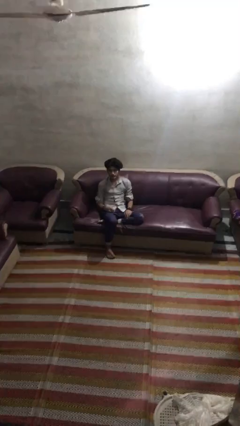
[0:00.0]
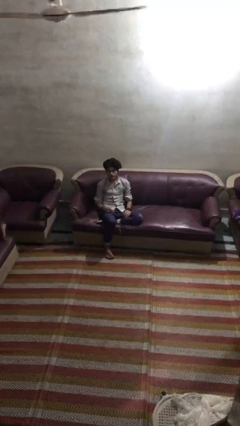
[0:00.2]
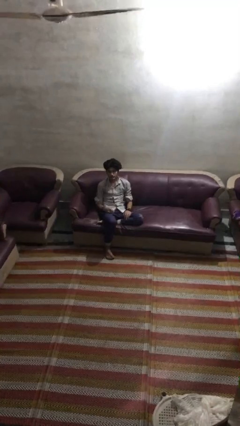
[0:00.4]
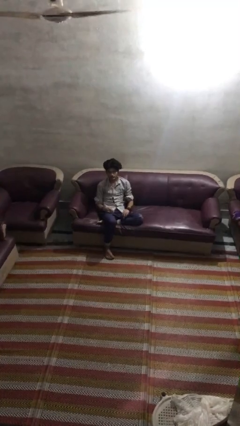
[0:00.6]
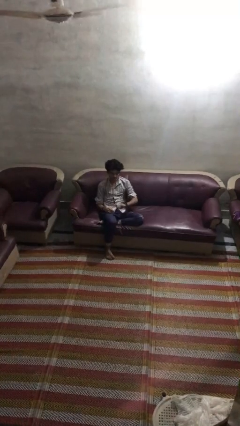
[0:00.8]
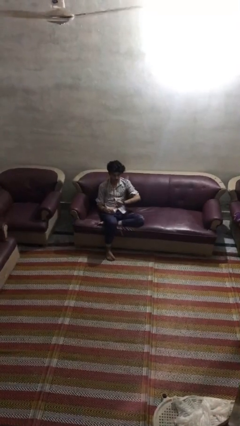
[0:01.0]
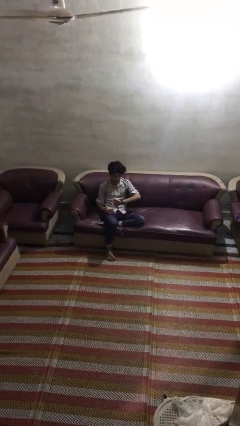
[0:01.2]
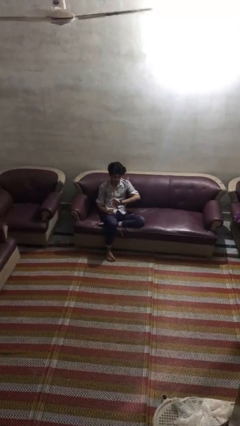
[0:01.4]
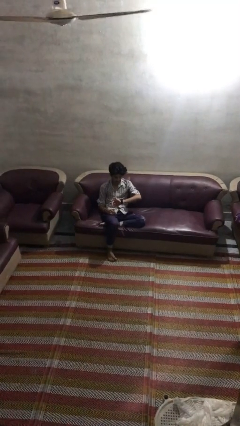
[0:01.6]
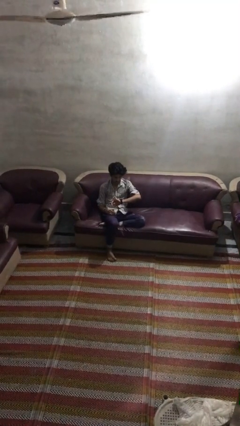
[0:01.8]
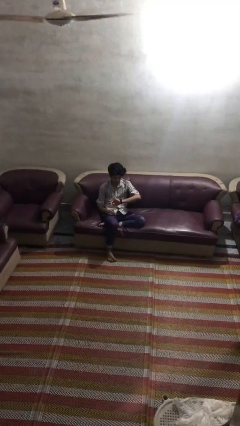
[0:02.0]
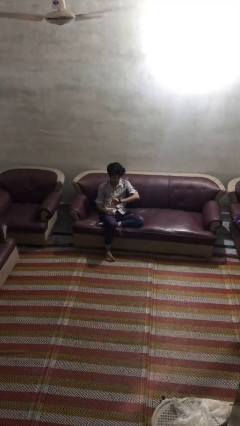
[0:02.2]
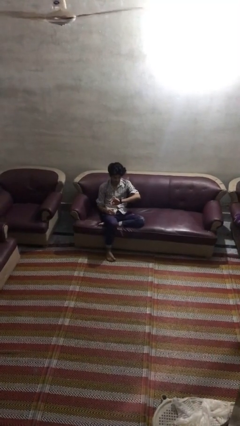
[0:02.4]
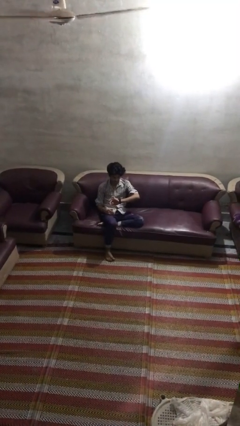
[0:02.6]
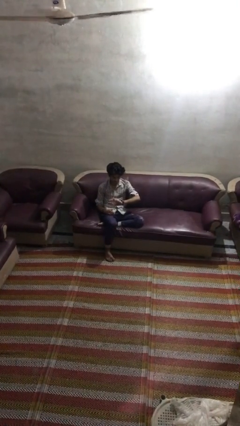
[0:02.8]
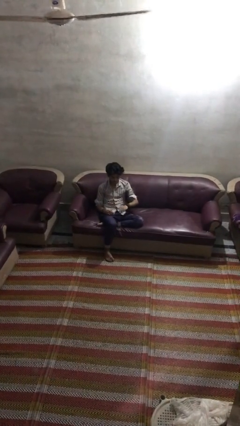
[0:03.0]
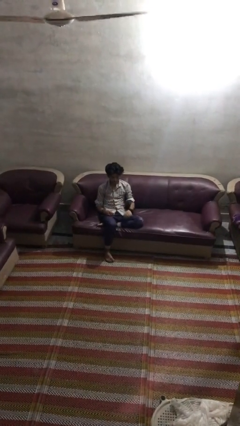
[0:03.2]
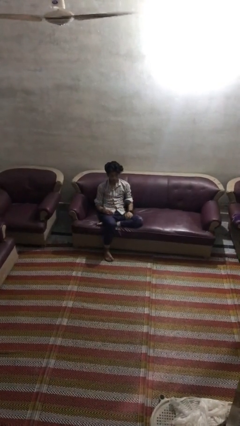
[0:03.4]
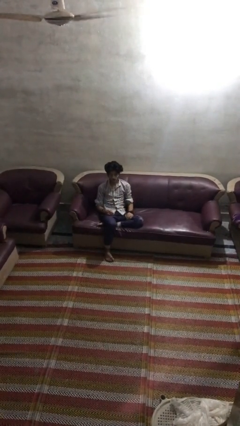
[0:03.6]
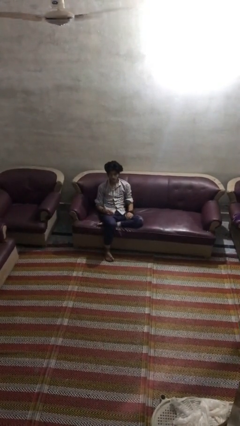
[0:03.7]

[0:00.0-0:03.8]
person looks at wristwatch

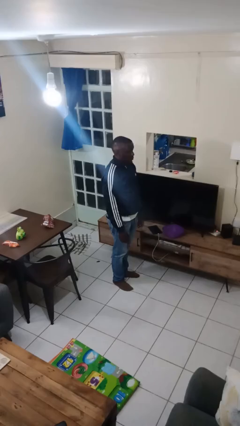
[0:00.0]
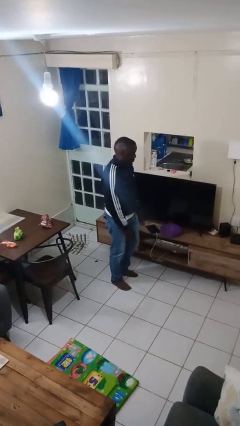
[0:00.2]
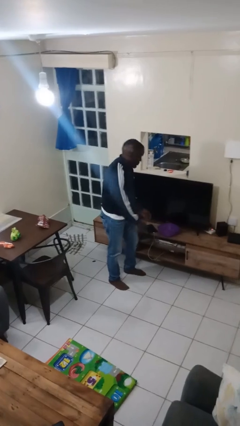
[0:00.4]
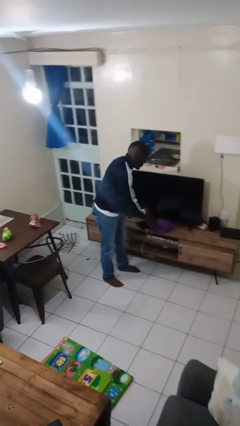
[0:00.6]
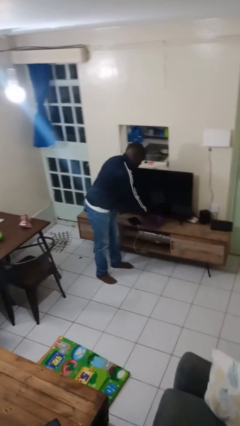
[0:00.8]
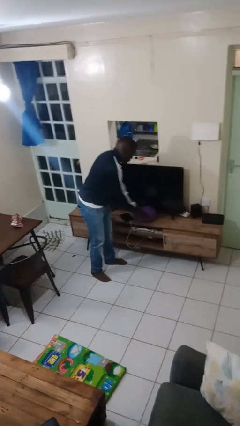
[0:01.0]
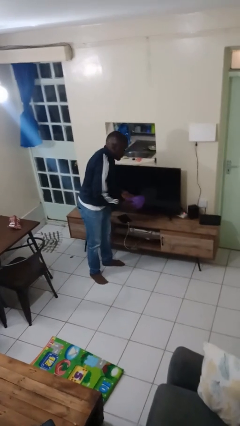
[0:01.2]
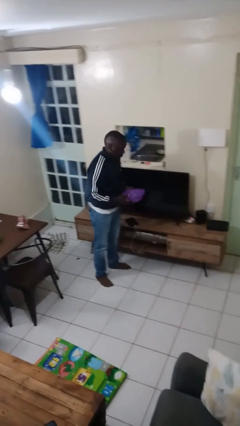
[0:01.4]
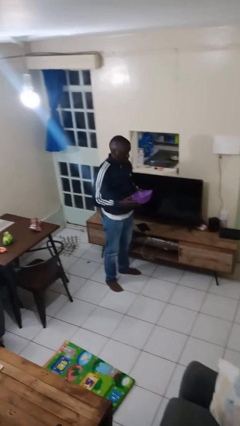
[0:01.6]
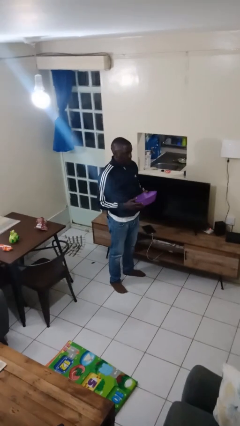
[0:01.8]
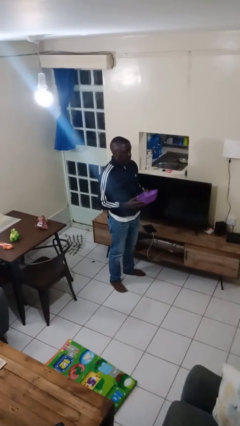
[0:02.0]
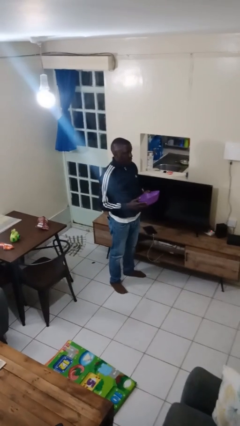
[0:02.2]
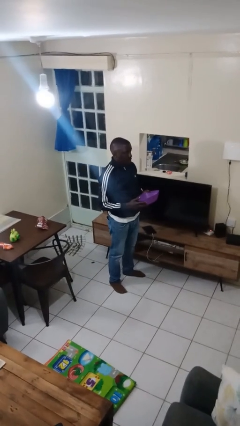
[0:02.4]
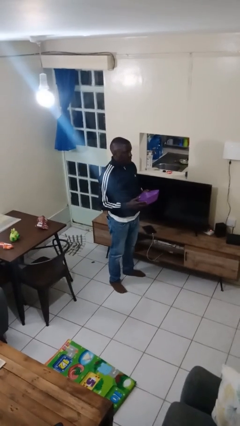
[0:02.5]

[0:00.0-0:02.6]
person picks up object from countertop

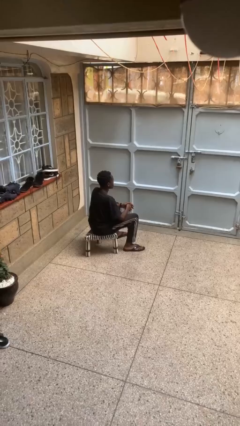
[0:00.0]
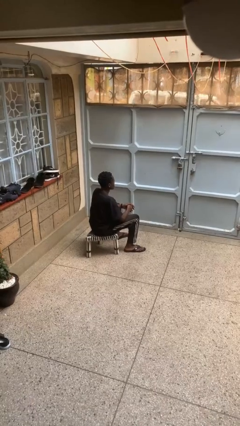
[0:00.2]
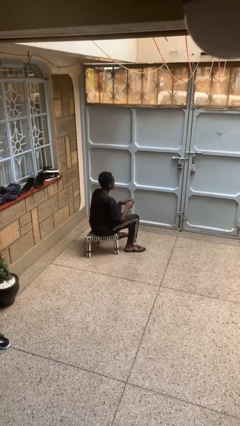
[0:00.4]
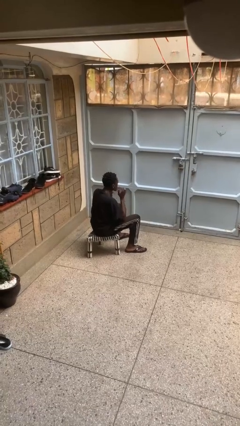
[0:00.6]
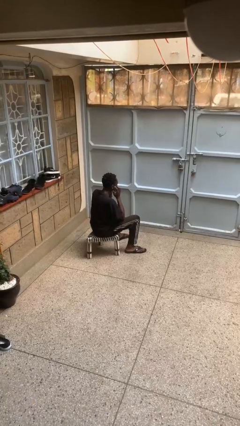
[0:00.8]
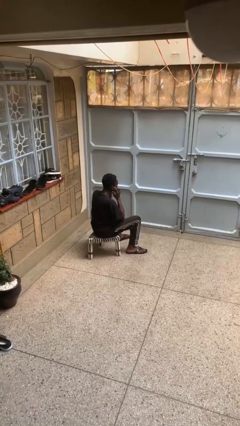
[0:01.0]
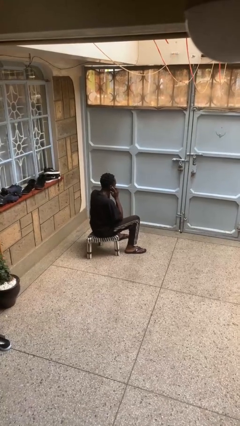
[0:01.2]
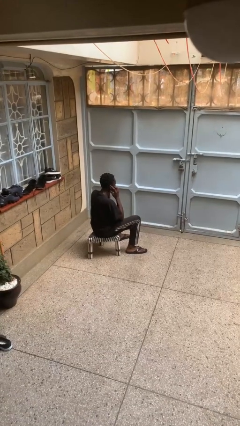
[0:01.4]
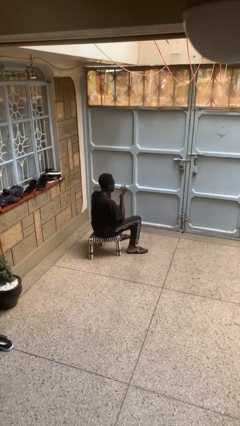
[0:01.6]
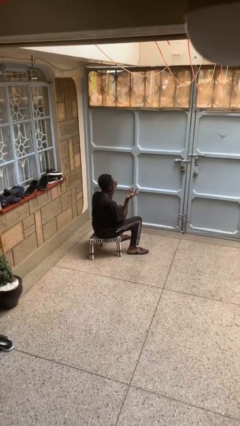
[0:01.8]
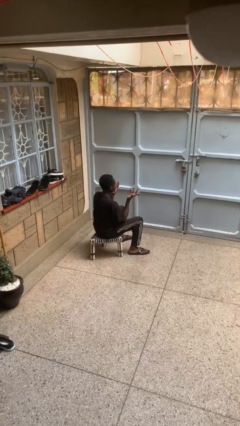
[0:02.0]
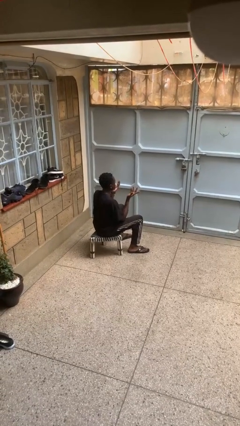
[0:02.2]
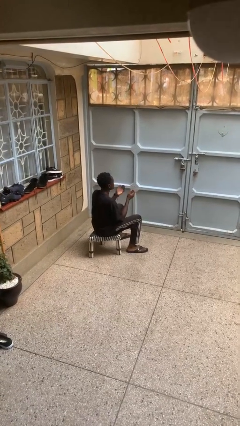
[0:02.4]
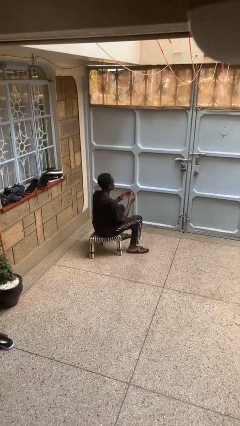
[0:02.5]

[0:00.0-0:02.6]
person puts fingers in ear

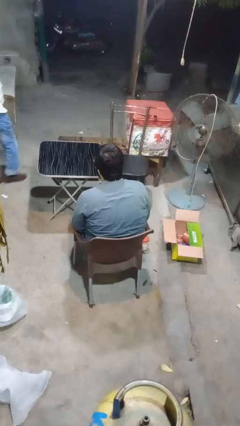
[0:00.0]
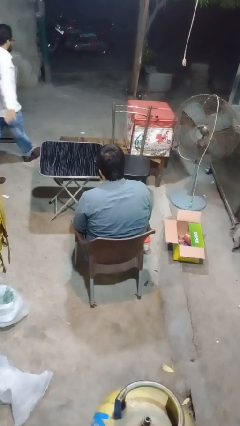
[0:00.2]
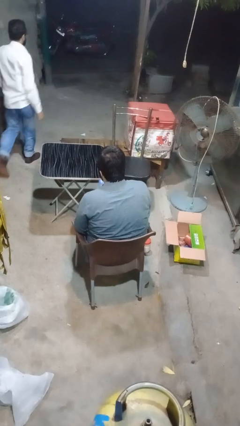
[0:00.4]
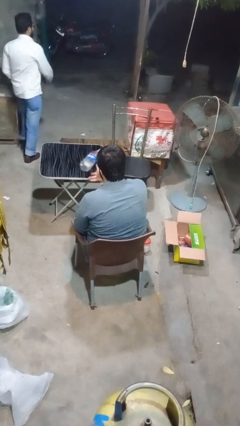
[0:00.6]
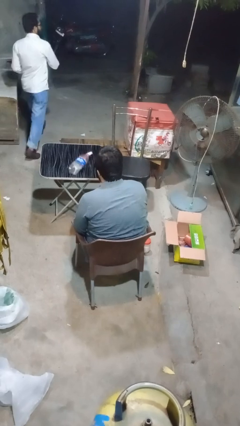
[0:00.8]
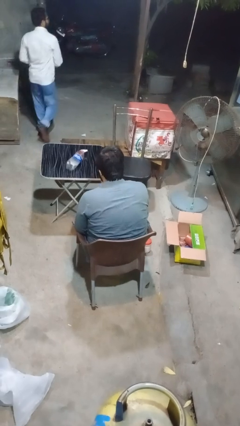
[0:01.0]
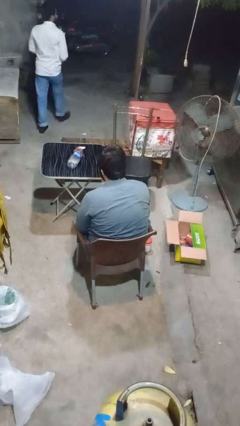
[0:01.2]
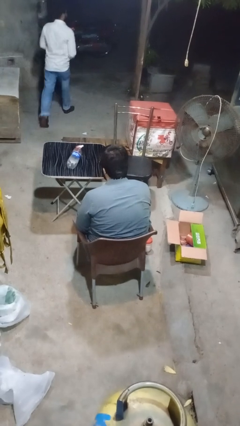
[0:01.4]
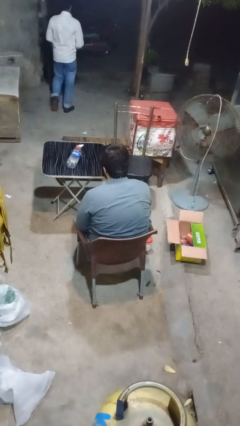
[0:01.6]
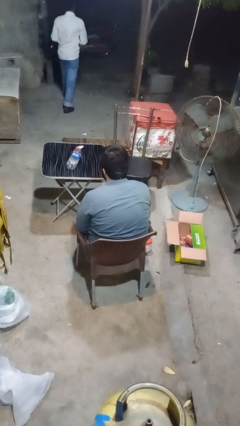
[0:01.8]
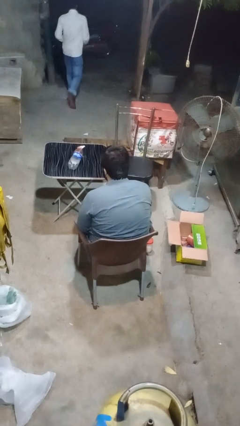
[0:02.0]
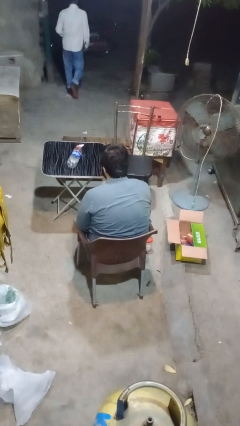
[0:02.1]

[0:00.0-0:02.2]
person throws object on table

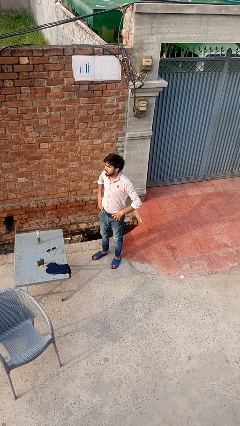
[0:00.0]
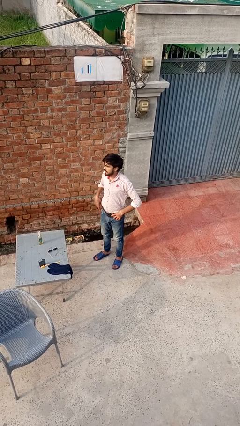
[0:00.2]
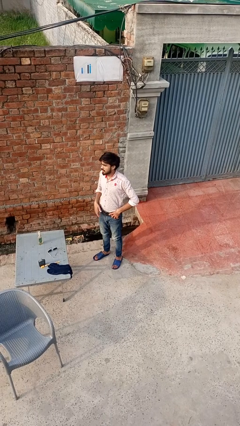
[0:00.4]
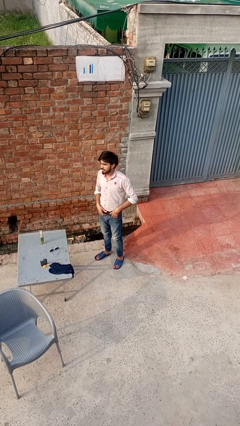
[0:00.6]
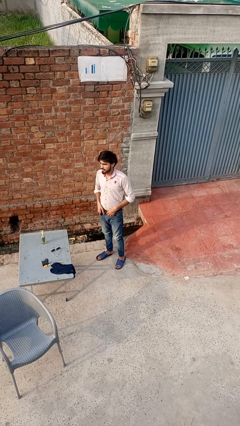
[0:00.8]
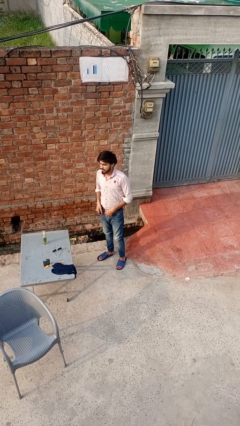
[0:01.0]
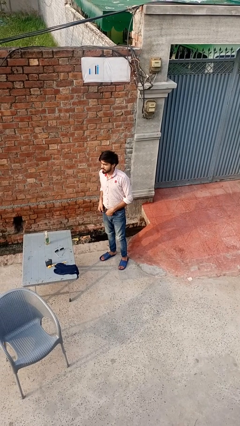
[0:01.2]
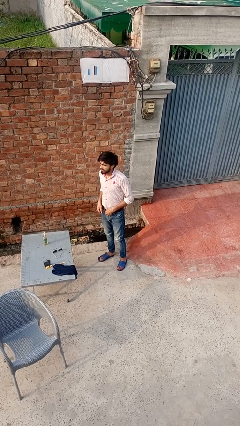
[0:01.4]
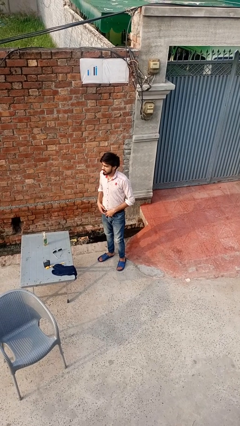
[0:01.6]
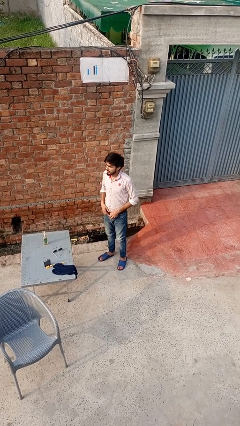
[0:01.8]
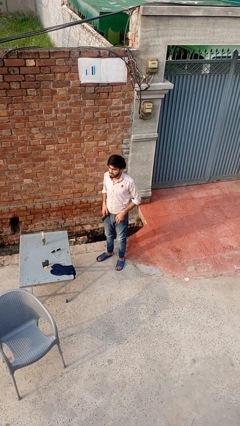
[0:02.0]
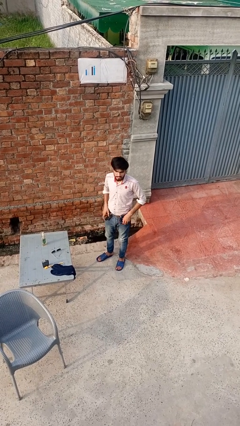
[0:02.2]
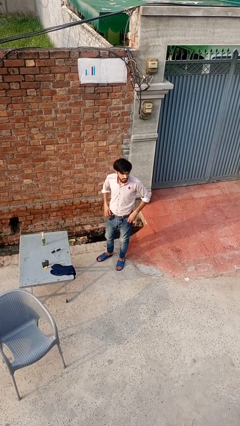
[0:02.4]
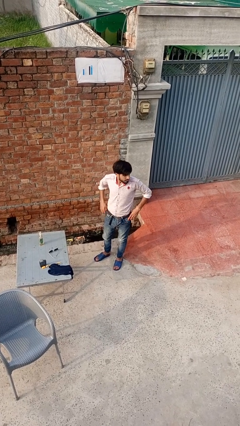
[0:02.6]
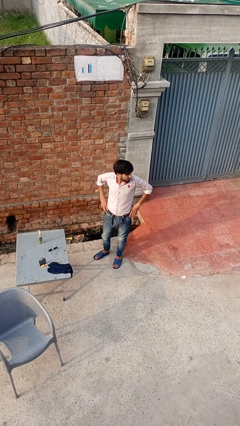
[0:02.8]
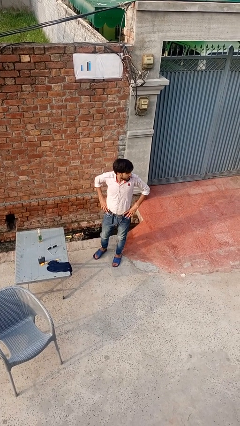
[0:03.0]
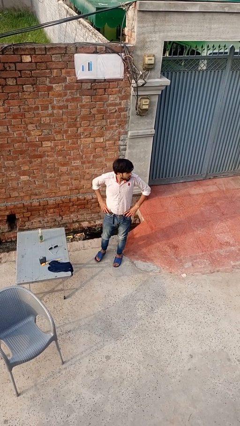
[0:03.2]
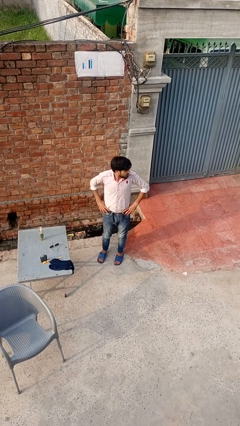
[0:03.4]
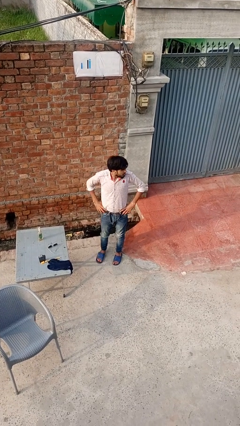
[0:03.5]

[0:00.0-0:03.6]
person takes off belt

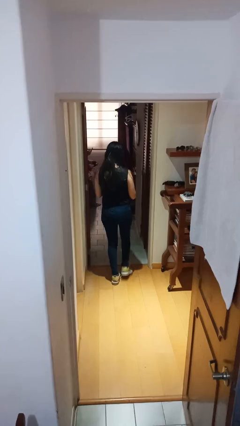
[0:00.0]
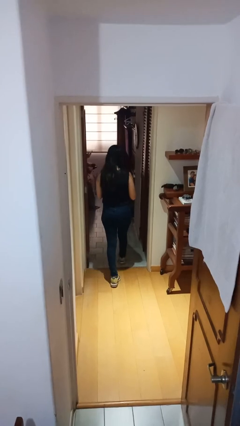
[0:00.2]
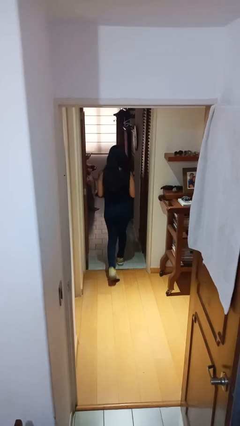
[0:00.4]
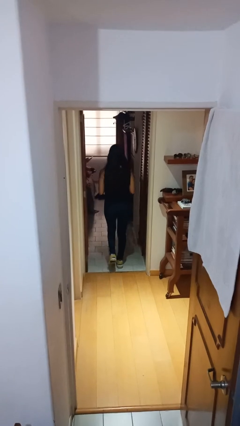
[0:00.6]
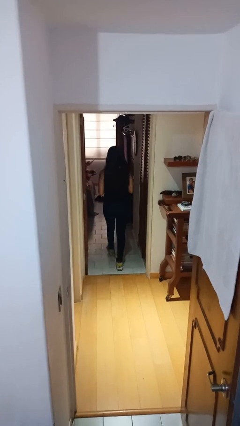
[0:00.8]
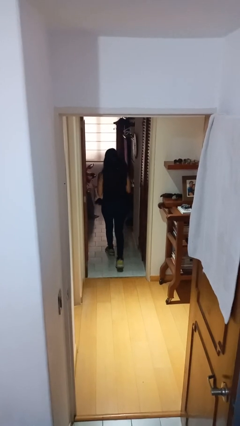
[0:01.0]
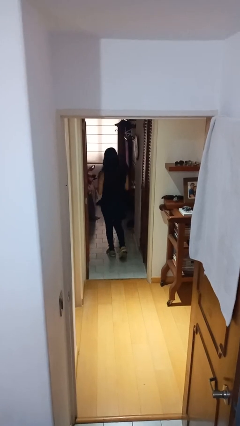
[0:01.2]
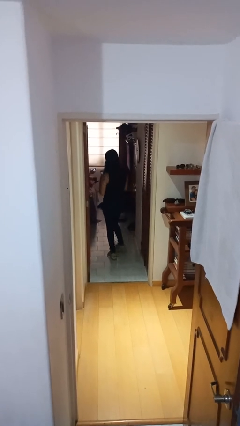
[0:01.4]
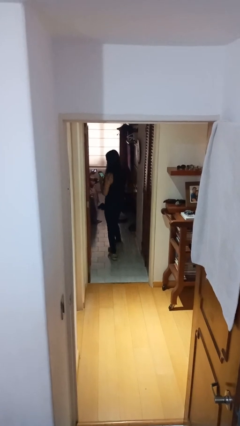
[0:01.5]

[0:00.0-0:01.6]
person exits scene through structure

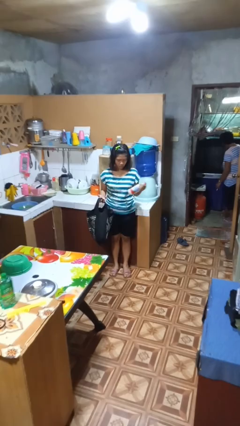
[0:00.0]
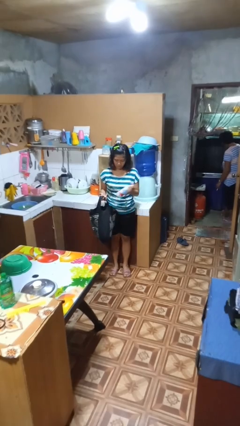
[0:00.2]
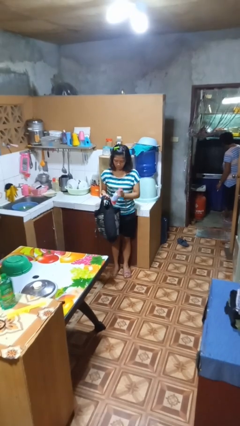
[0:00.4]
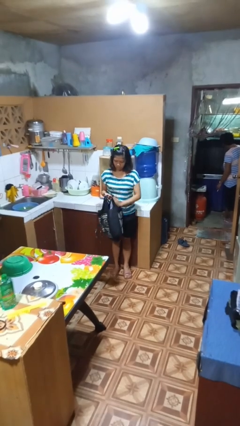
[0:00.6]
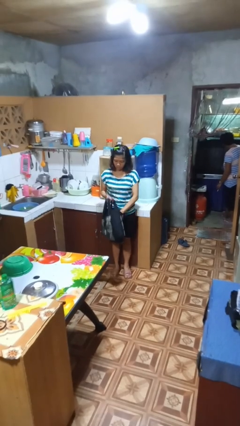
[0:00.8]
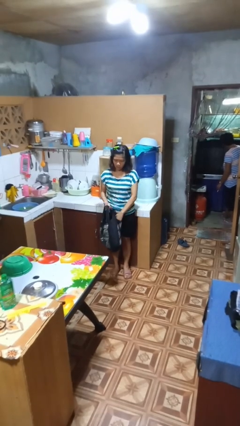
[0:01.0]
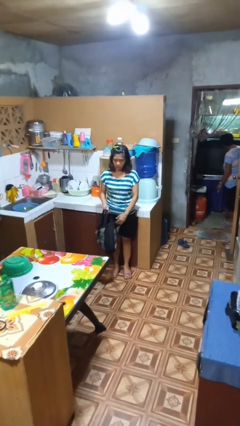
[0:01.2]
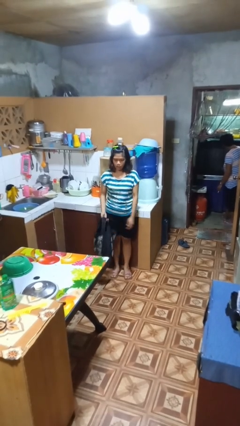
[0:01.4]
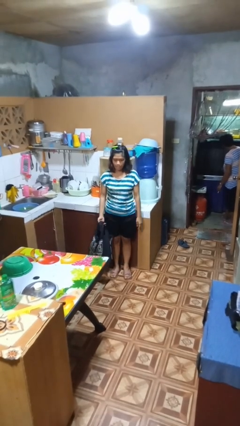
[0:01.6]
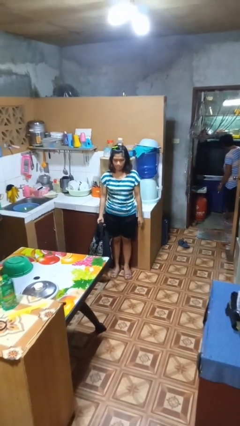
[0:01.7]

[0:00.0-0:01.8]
person puts object into bag
